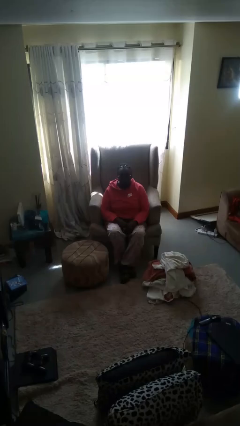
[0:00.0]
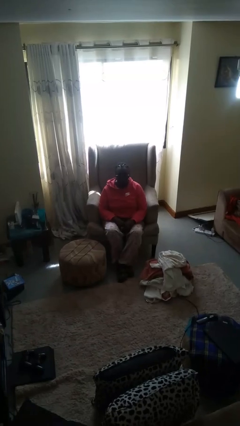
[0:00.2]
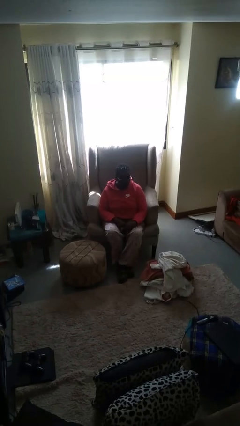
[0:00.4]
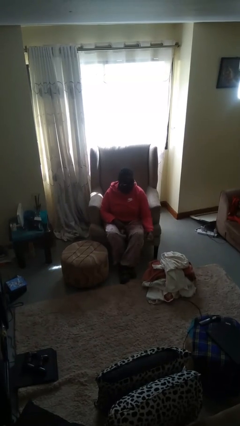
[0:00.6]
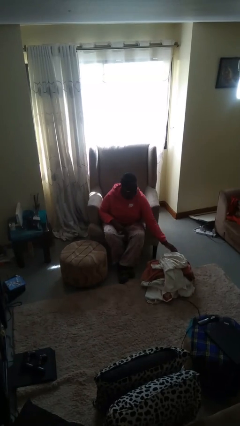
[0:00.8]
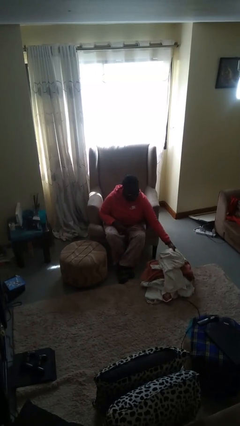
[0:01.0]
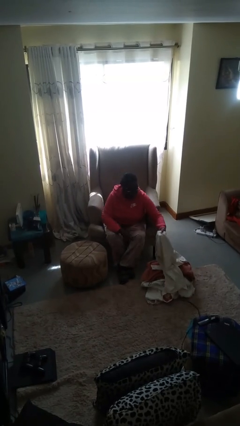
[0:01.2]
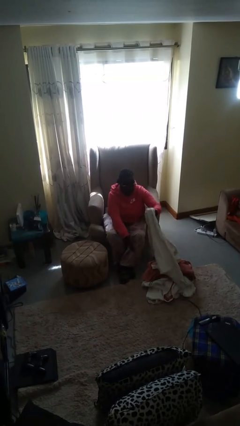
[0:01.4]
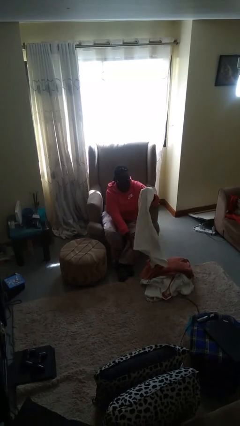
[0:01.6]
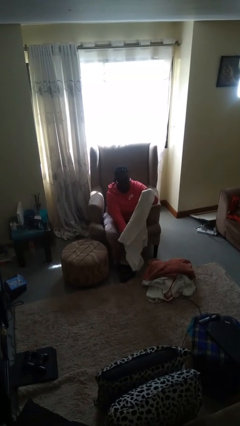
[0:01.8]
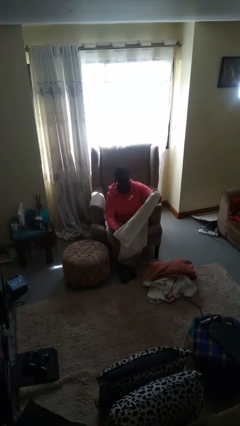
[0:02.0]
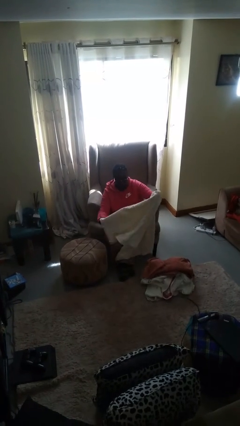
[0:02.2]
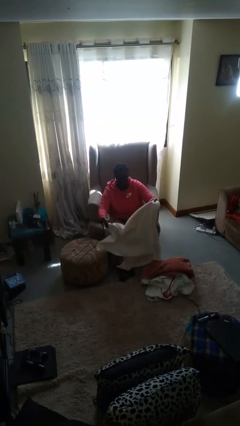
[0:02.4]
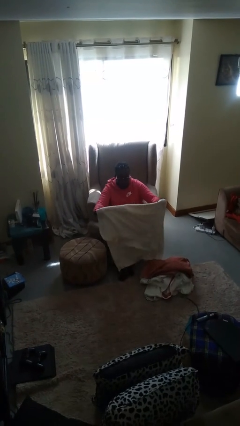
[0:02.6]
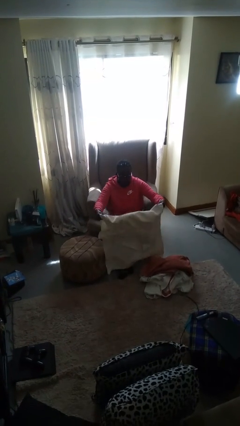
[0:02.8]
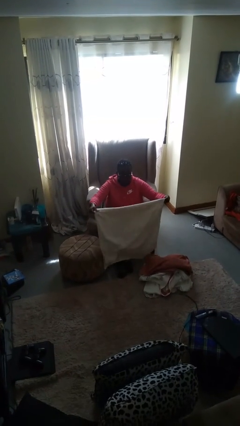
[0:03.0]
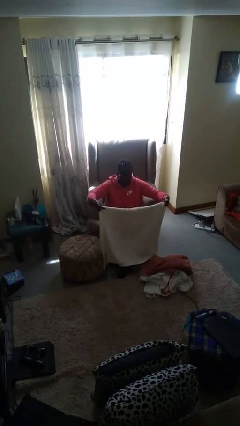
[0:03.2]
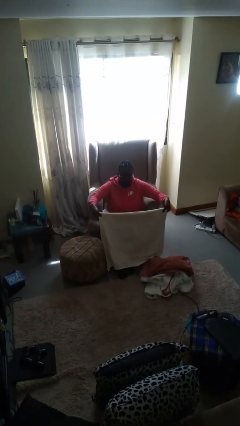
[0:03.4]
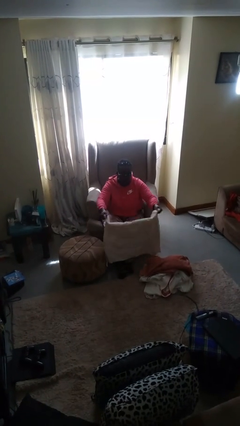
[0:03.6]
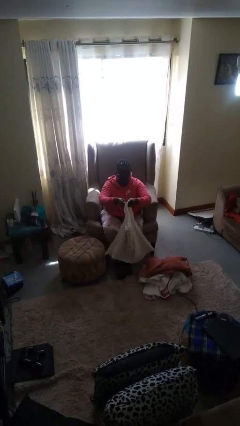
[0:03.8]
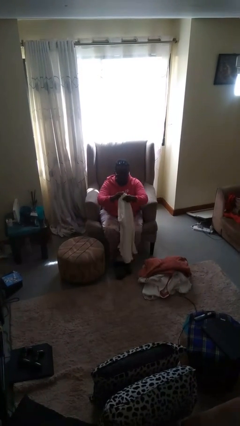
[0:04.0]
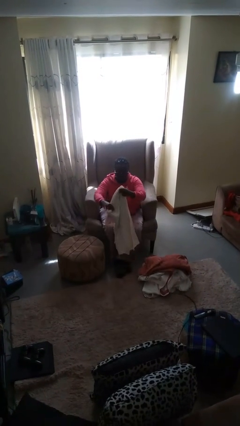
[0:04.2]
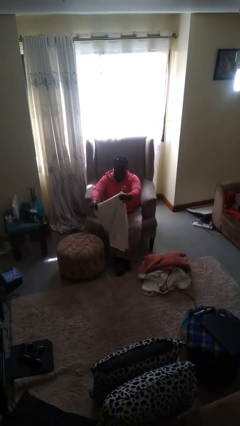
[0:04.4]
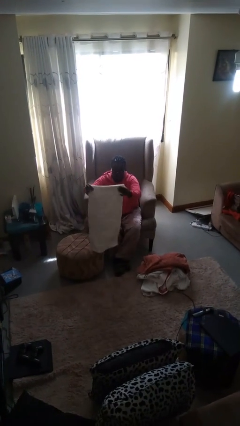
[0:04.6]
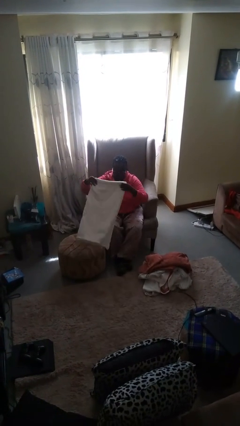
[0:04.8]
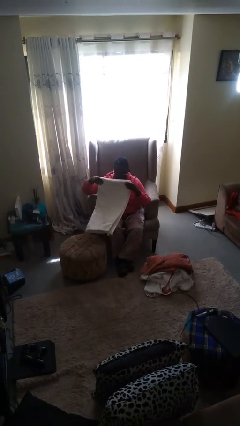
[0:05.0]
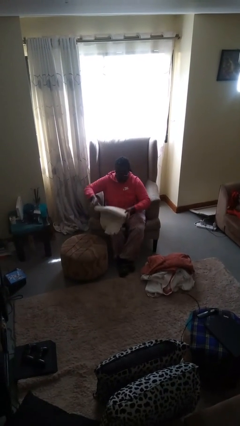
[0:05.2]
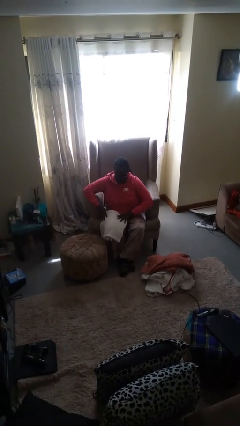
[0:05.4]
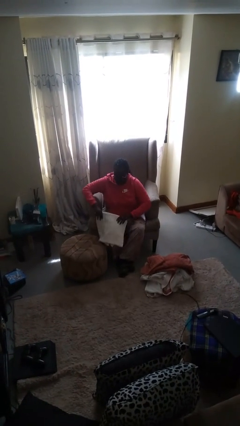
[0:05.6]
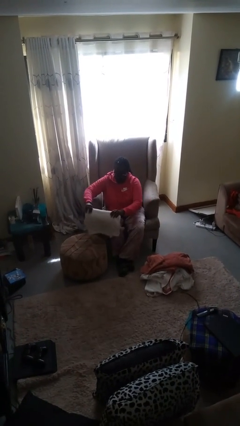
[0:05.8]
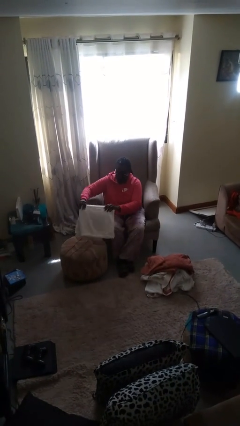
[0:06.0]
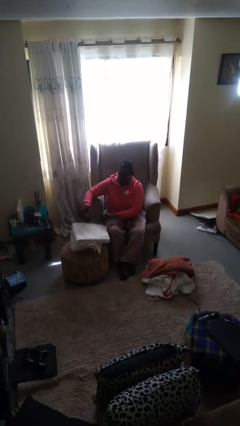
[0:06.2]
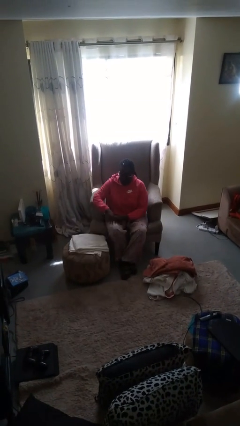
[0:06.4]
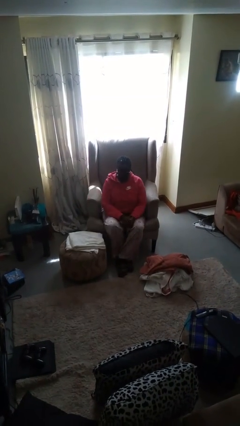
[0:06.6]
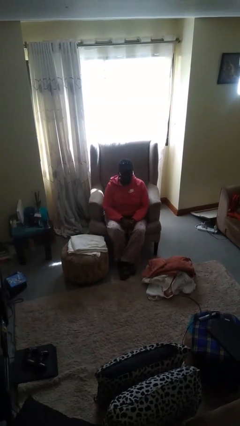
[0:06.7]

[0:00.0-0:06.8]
person folds towel

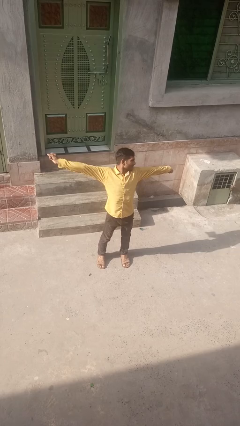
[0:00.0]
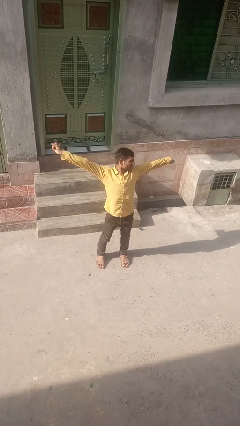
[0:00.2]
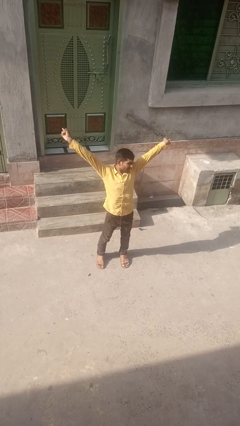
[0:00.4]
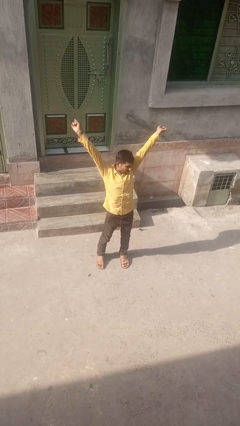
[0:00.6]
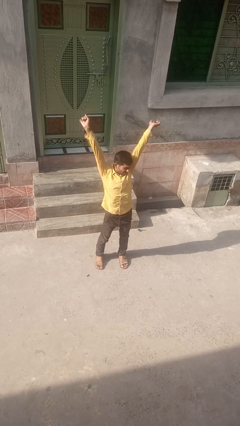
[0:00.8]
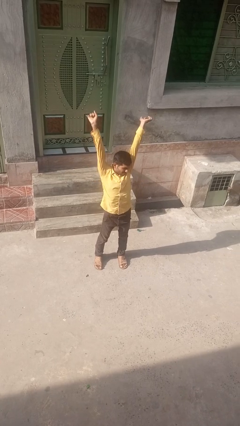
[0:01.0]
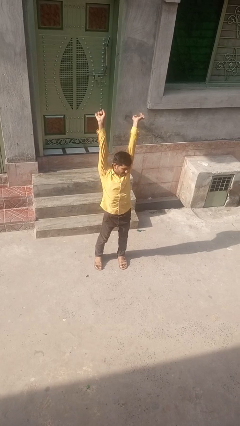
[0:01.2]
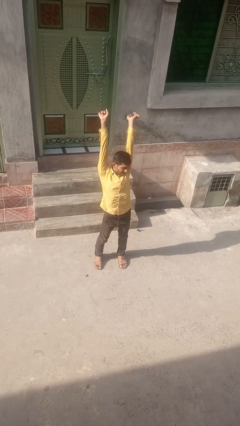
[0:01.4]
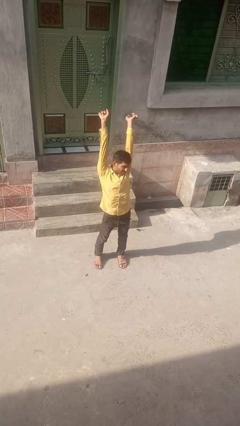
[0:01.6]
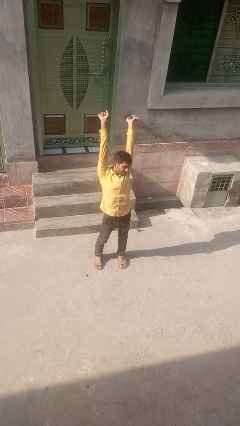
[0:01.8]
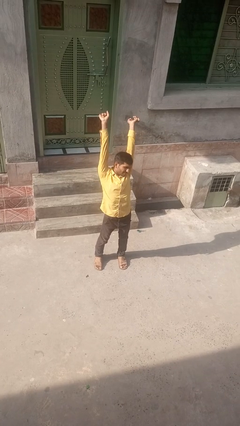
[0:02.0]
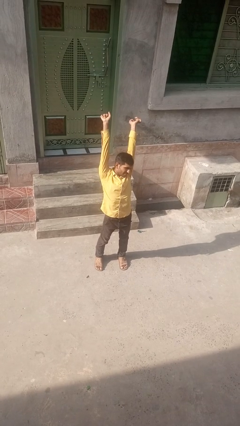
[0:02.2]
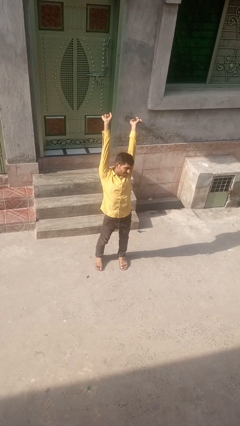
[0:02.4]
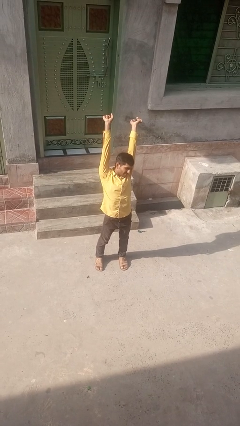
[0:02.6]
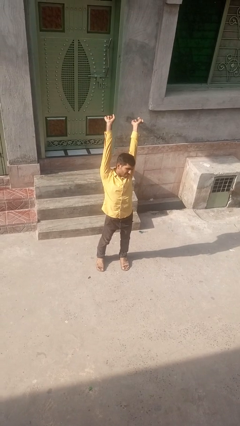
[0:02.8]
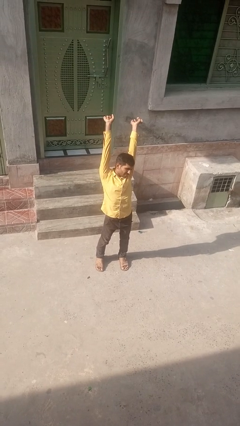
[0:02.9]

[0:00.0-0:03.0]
person stretches arms over head

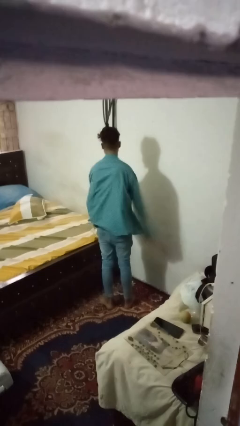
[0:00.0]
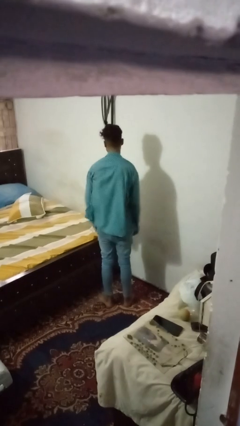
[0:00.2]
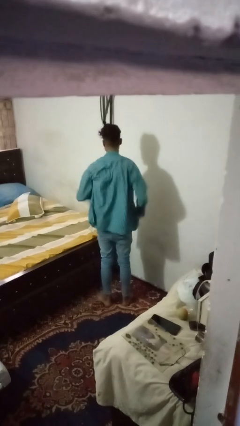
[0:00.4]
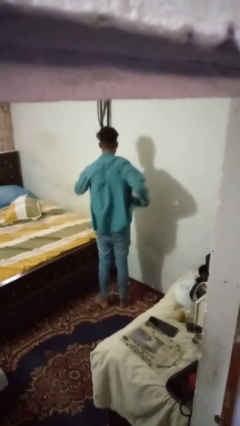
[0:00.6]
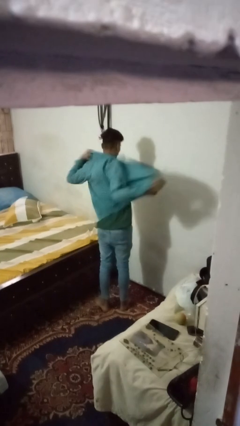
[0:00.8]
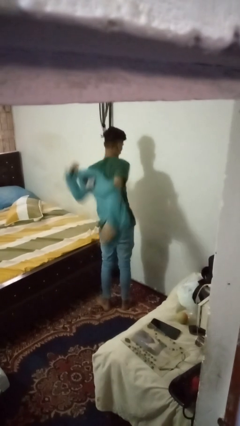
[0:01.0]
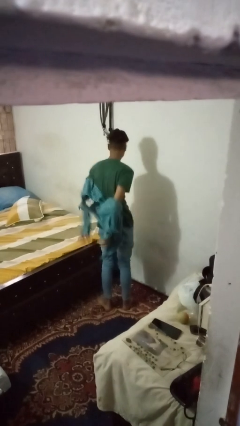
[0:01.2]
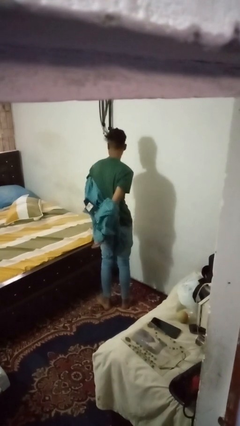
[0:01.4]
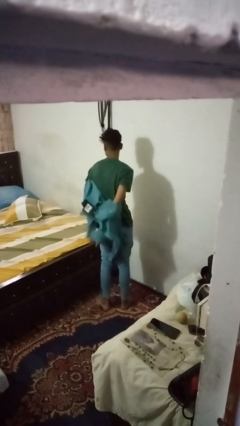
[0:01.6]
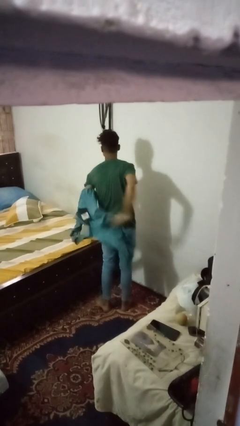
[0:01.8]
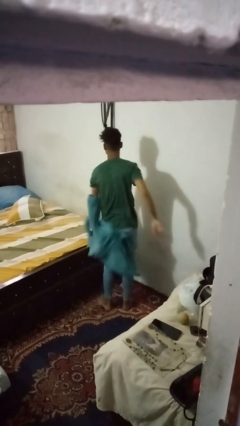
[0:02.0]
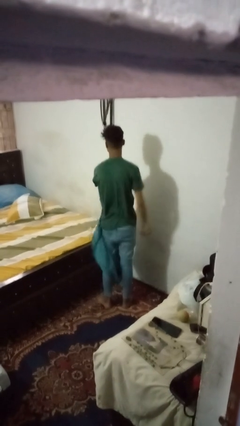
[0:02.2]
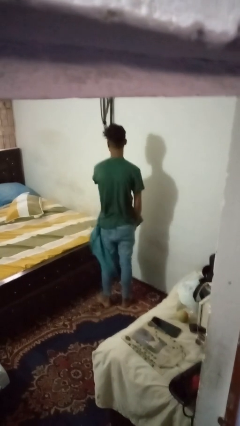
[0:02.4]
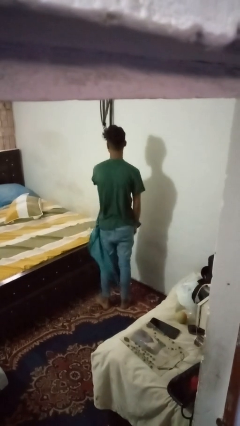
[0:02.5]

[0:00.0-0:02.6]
person takes off shirt

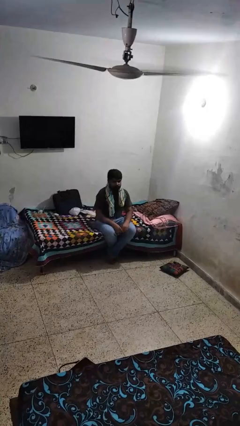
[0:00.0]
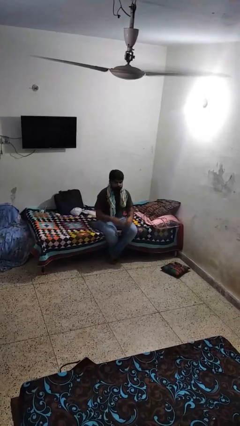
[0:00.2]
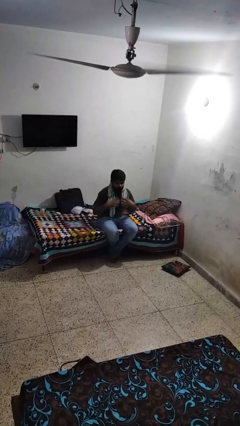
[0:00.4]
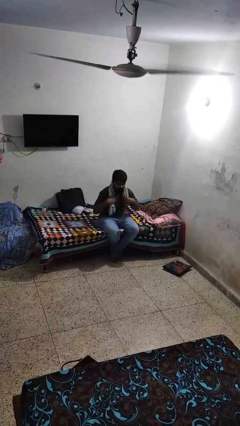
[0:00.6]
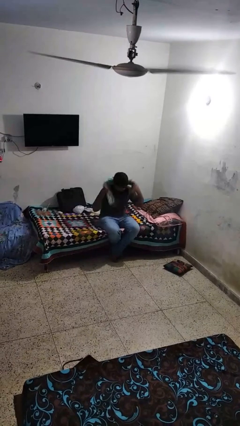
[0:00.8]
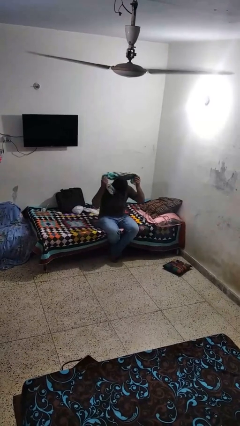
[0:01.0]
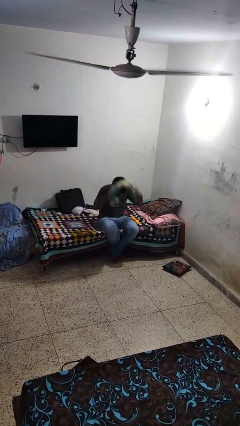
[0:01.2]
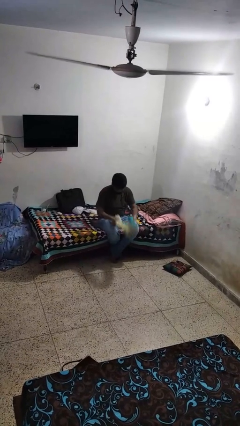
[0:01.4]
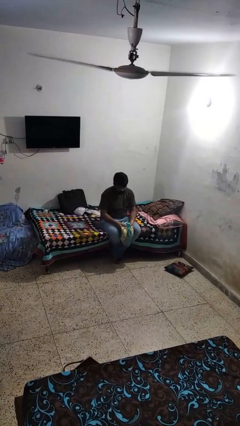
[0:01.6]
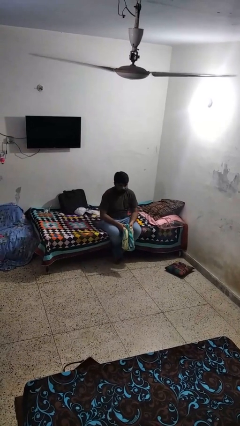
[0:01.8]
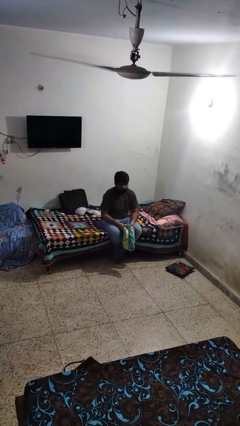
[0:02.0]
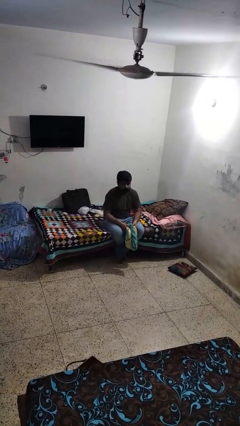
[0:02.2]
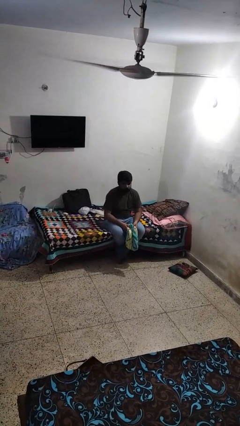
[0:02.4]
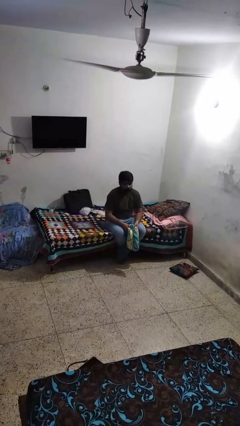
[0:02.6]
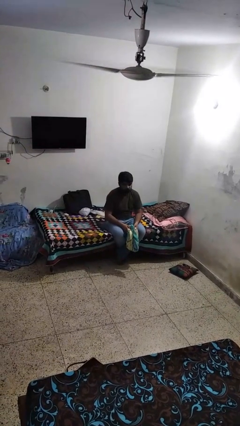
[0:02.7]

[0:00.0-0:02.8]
person takes off scarf

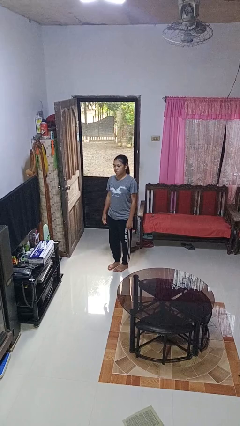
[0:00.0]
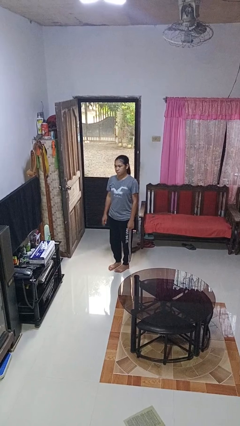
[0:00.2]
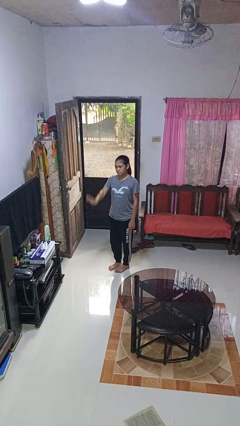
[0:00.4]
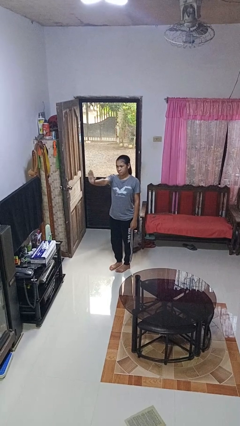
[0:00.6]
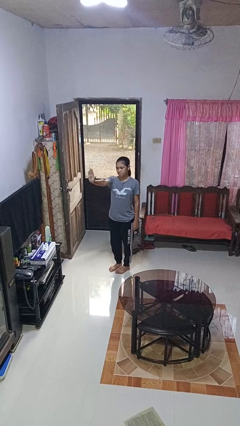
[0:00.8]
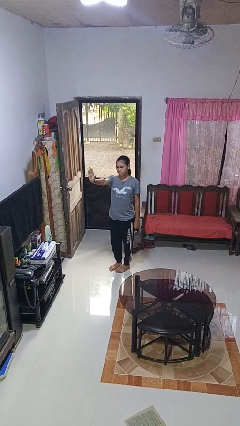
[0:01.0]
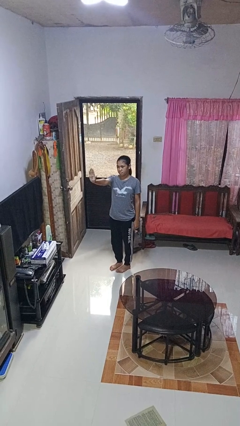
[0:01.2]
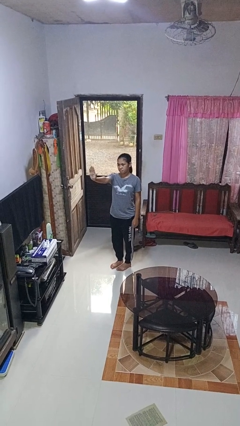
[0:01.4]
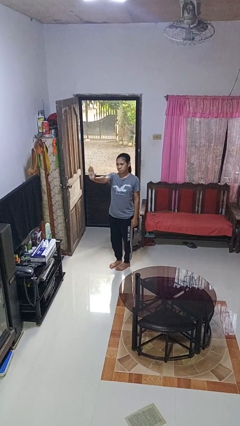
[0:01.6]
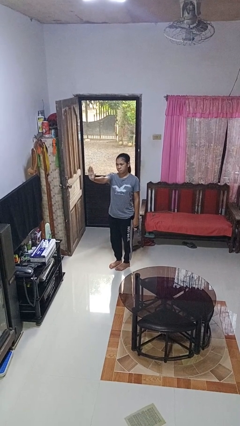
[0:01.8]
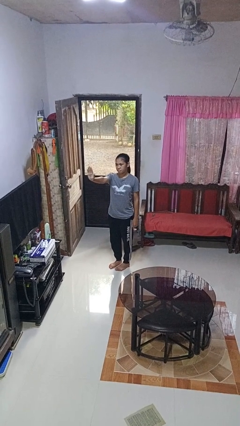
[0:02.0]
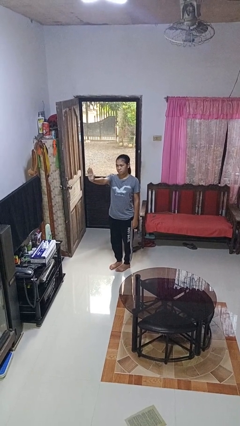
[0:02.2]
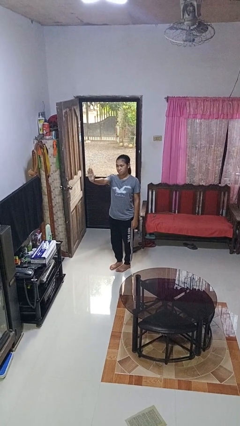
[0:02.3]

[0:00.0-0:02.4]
person gestures stop
